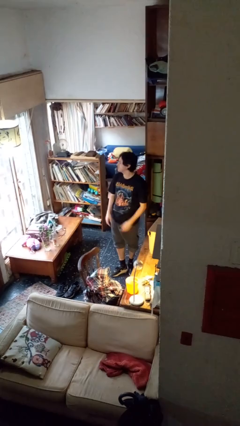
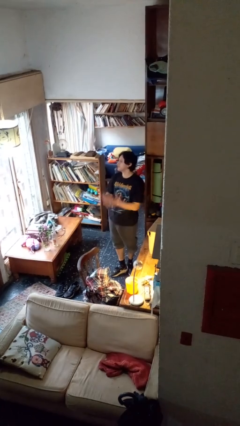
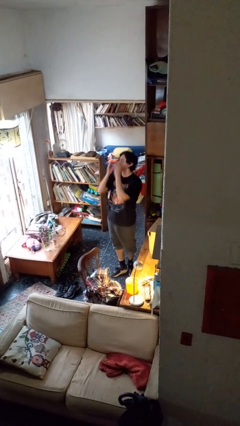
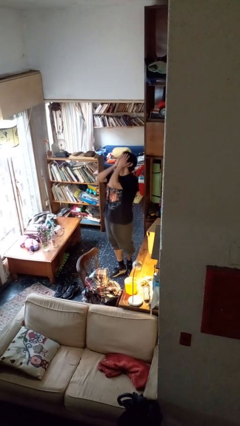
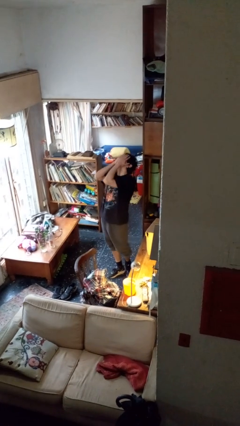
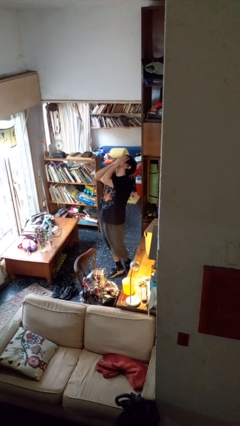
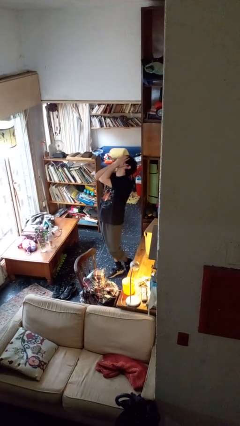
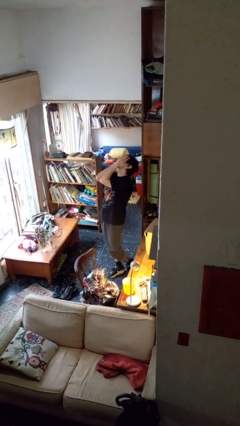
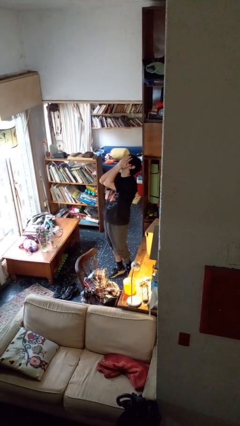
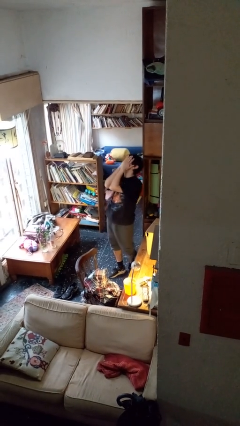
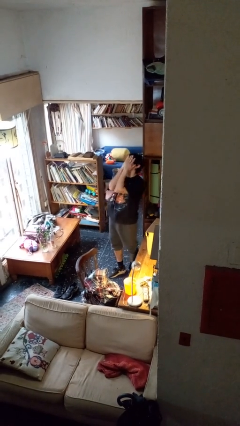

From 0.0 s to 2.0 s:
person covers face with hands

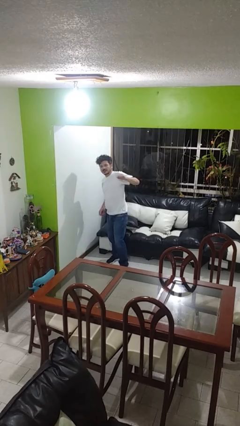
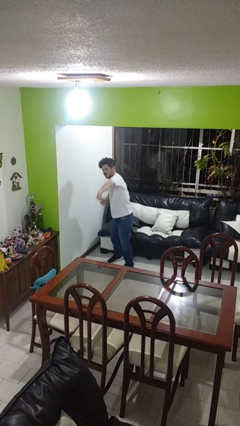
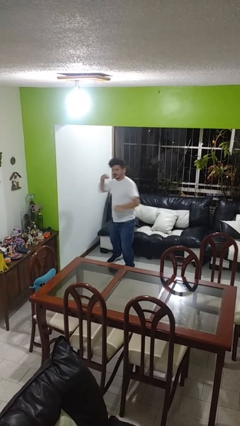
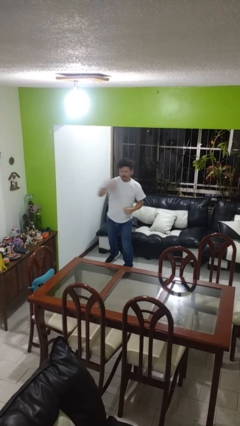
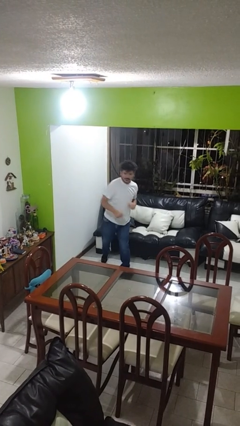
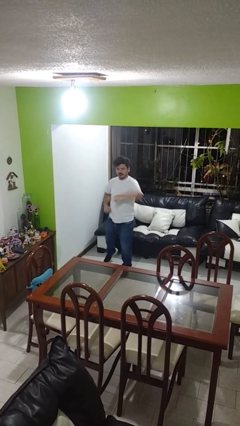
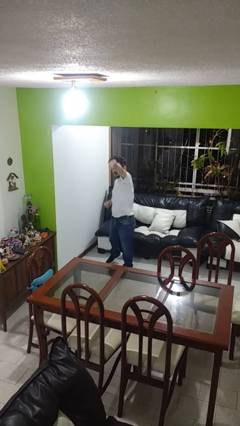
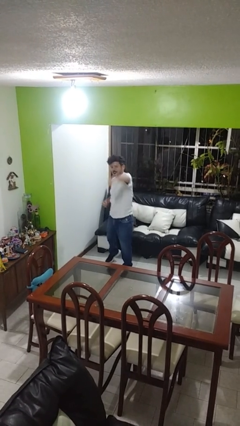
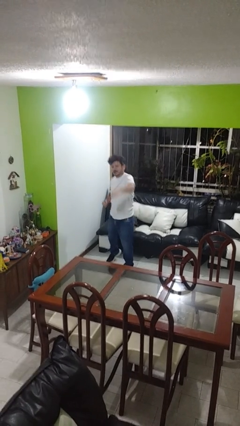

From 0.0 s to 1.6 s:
person punches

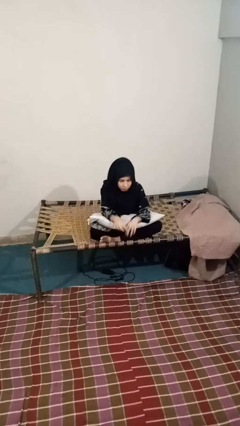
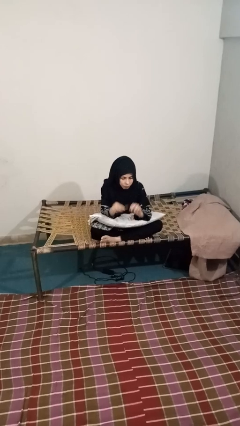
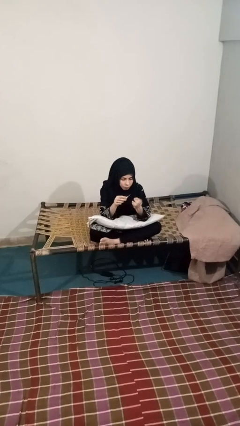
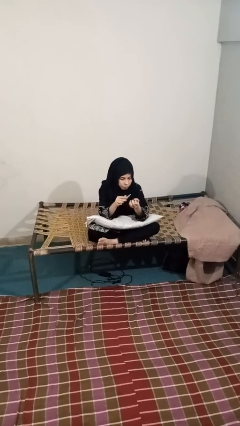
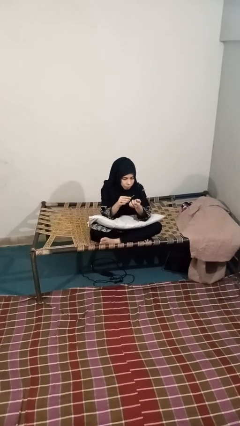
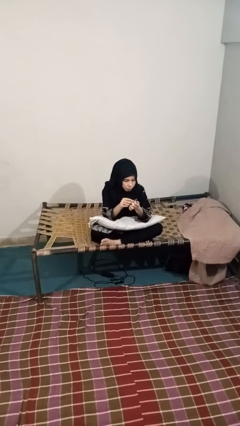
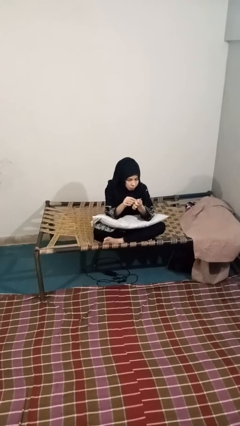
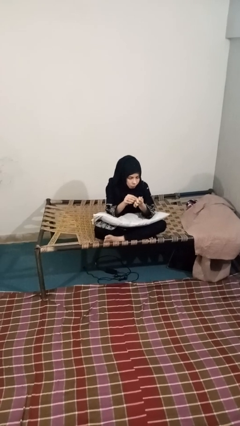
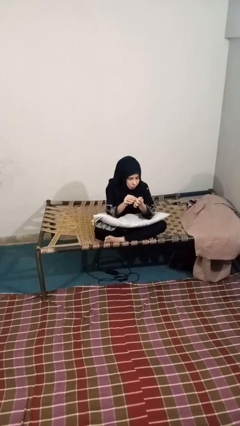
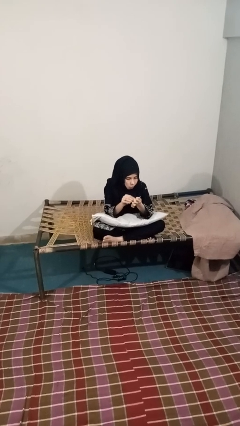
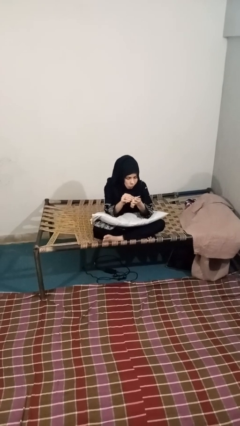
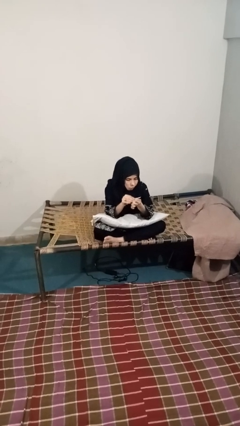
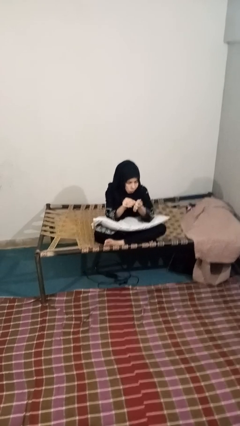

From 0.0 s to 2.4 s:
person files fingernails

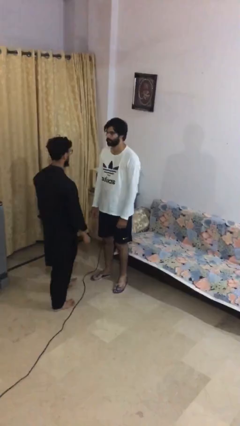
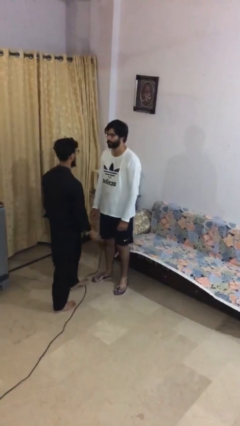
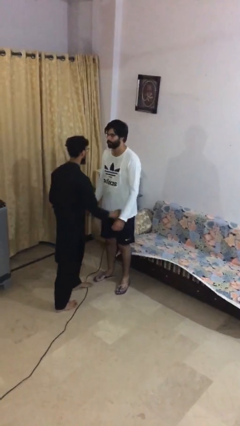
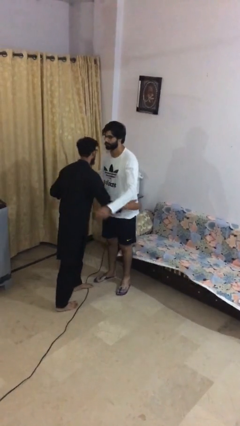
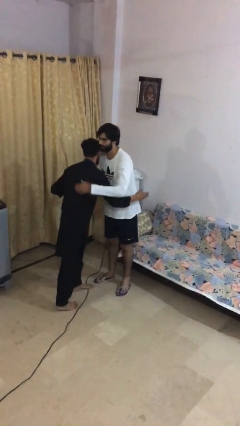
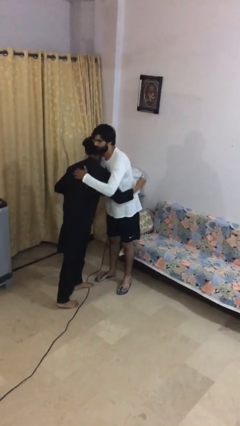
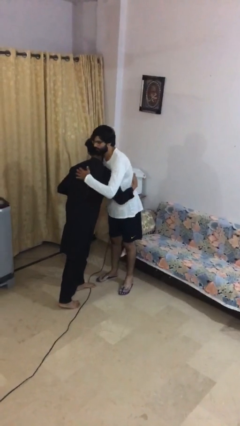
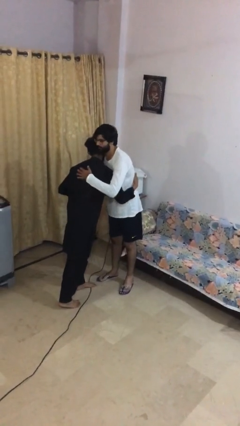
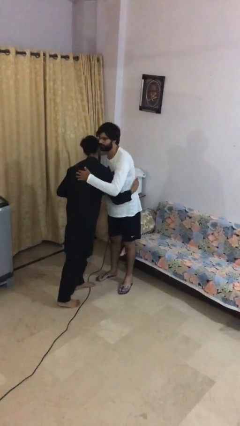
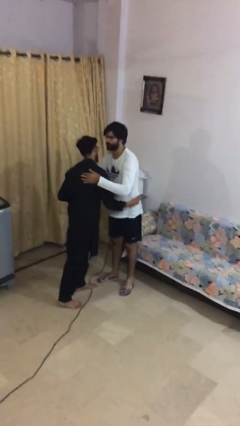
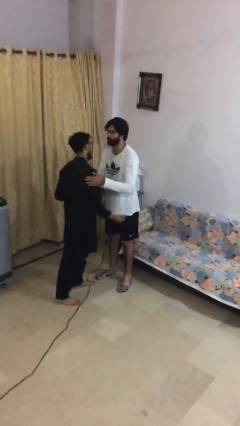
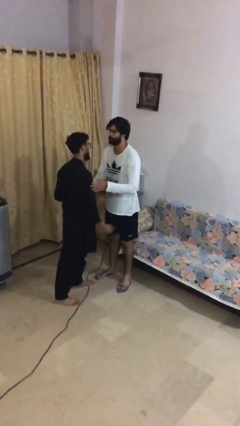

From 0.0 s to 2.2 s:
person embraces person

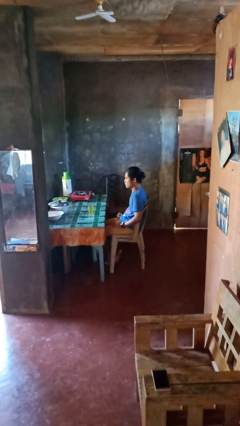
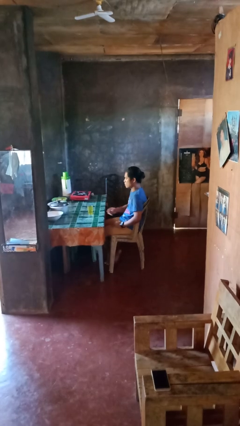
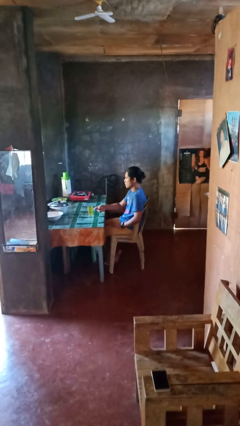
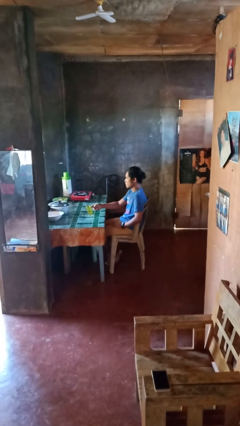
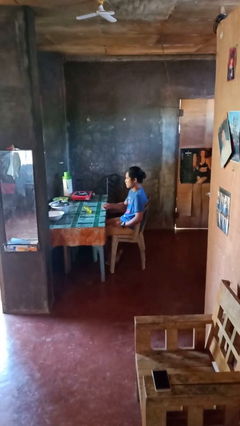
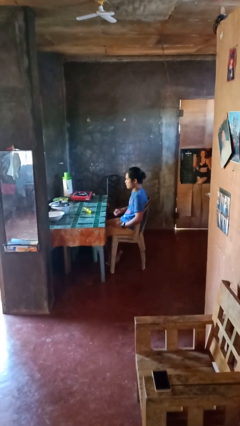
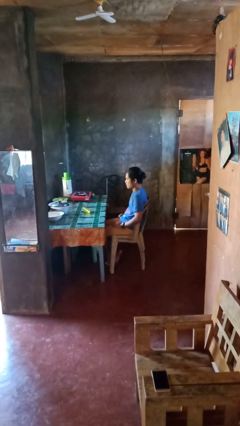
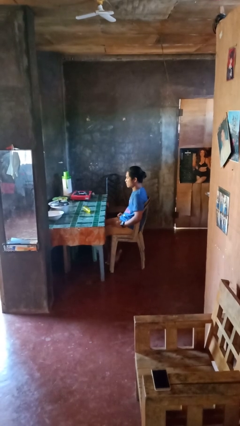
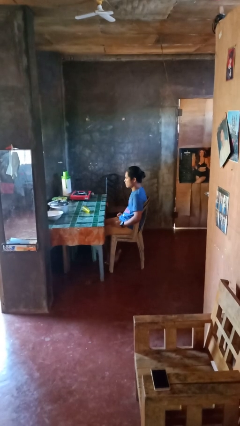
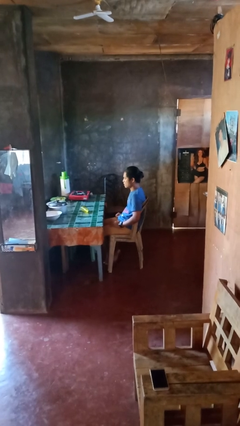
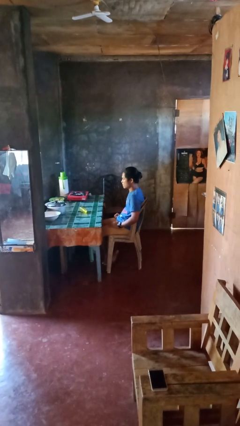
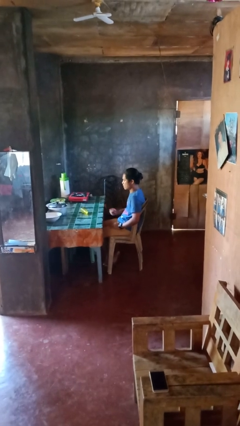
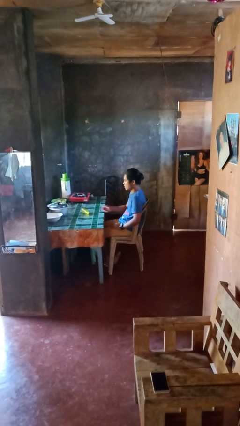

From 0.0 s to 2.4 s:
person knocks over glass

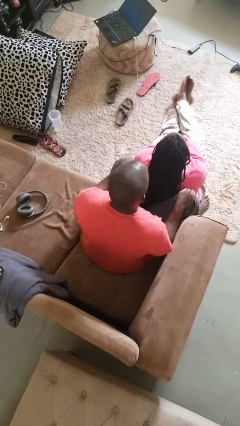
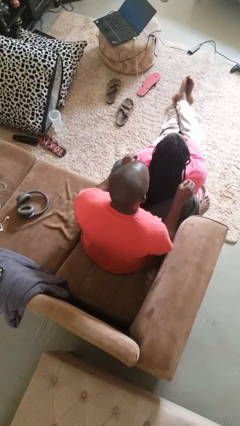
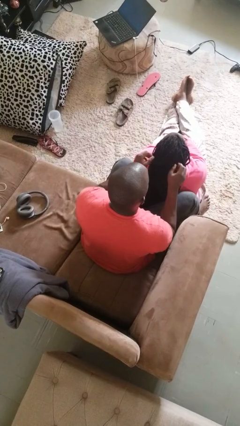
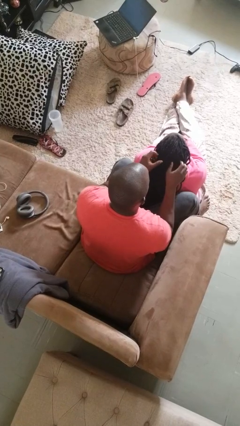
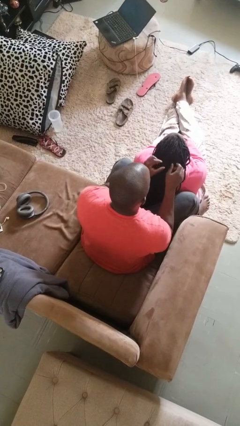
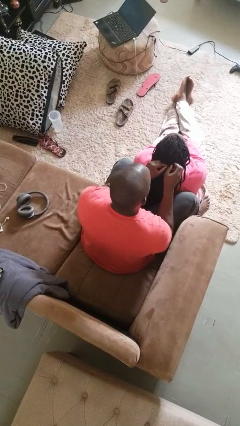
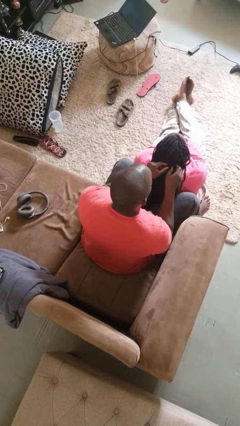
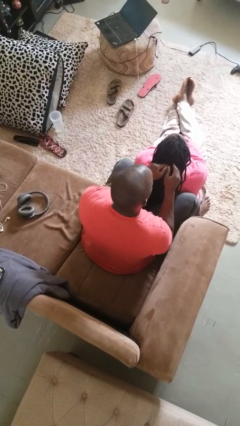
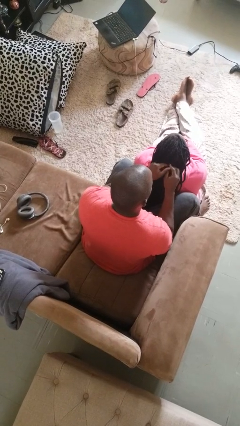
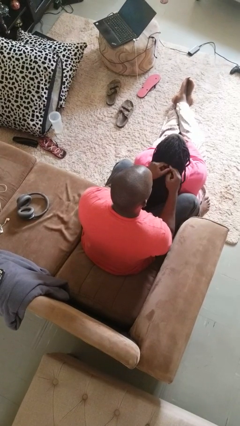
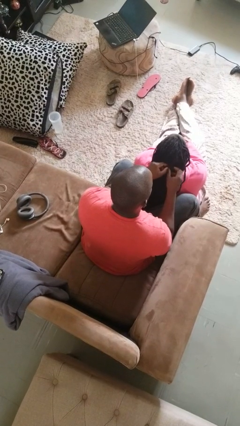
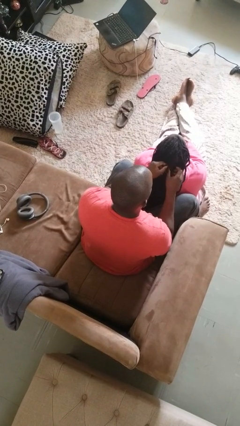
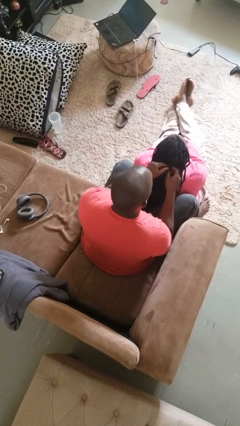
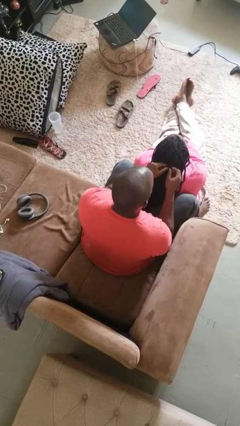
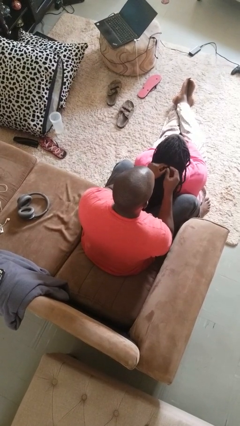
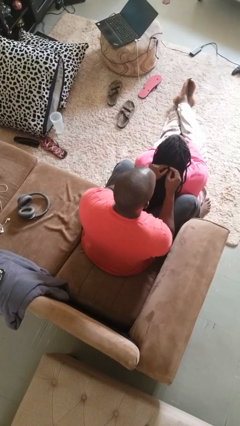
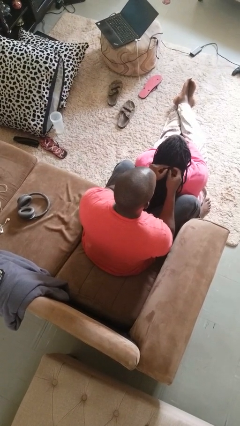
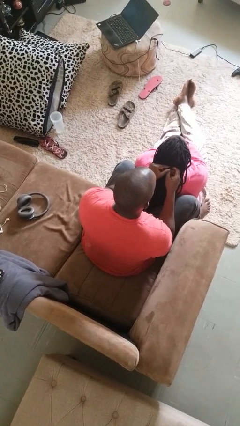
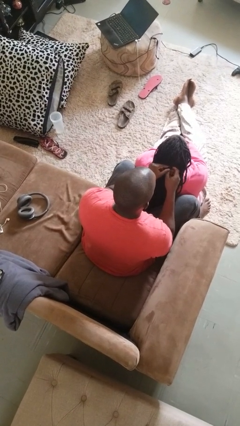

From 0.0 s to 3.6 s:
person braids hair of person

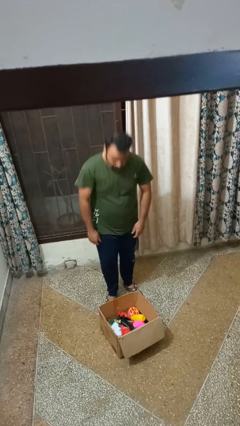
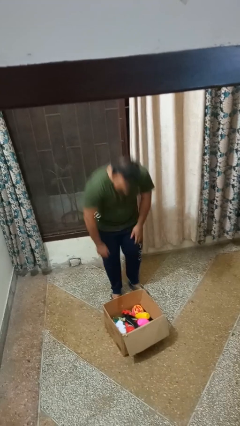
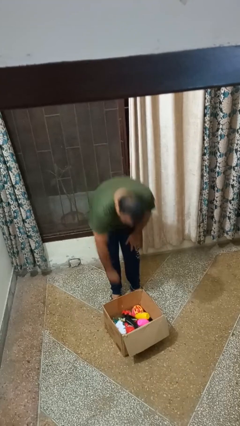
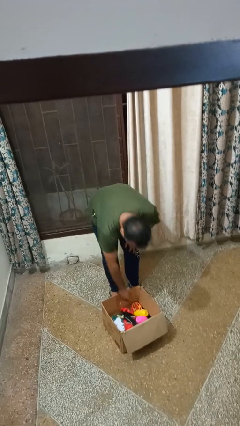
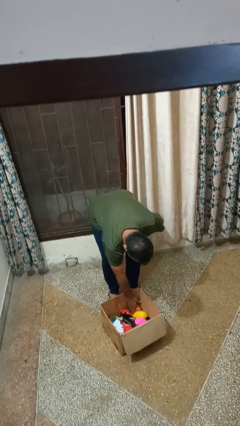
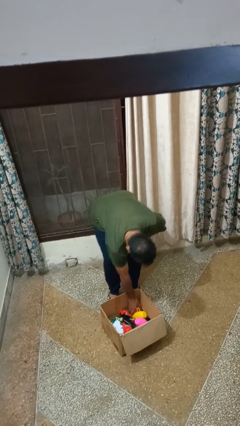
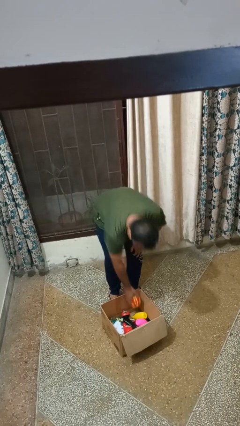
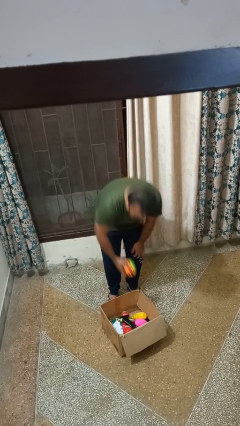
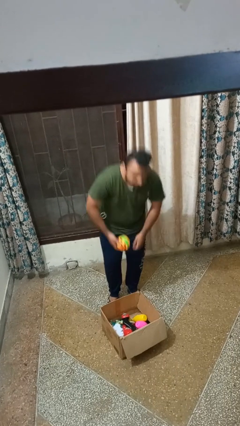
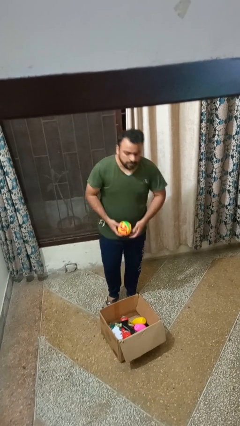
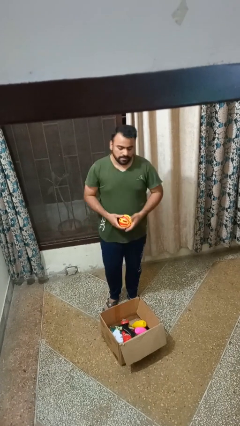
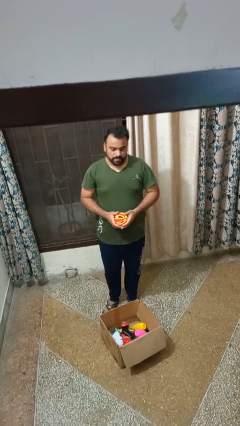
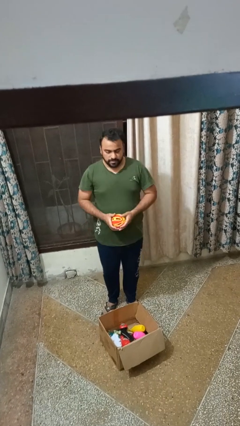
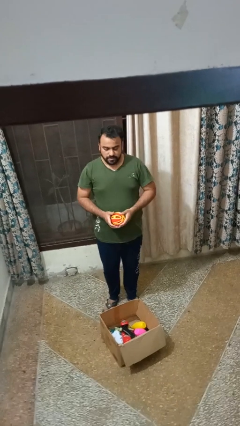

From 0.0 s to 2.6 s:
person takes object from box

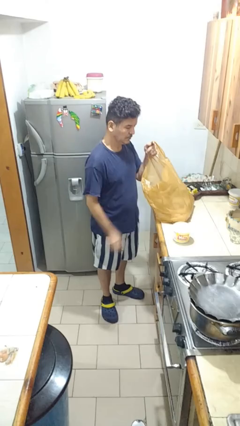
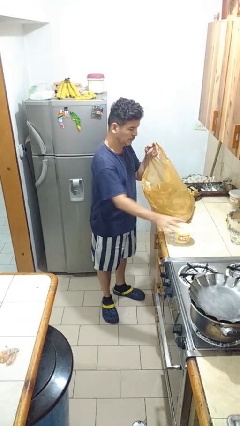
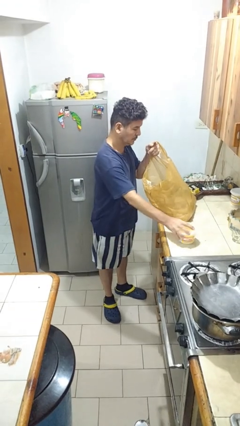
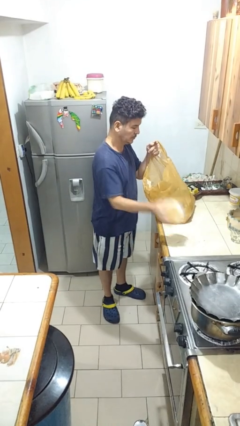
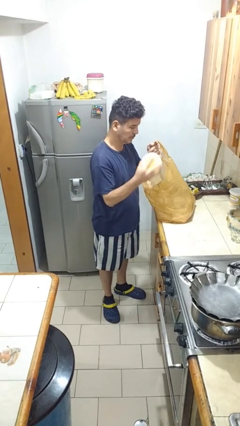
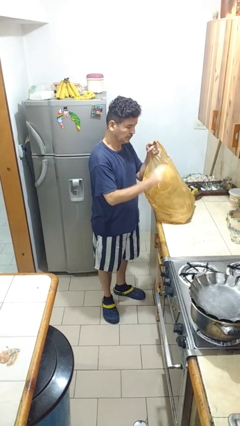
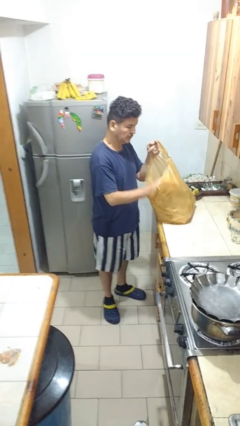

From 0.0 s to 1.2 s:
person puts object into bag
